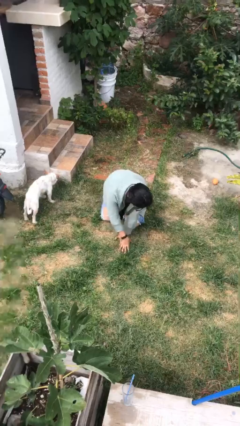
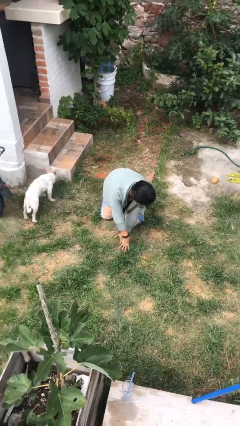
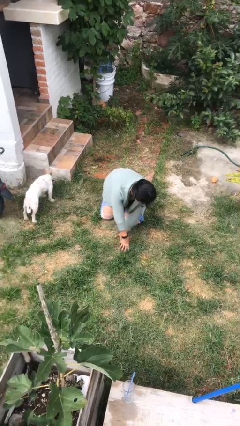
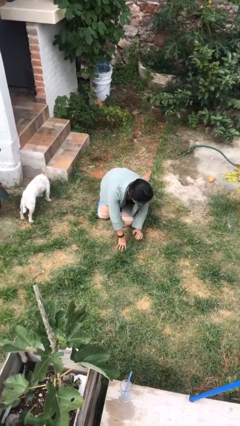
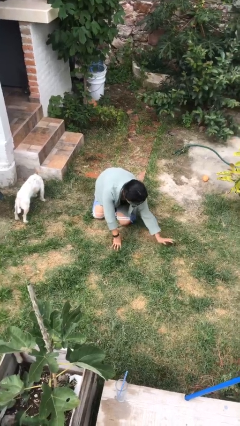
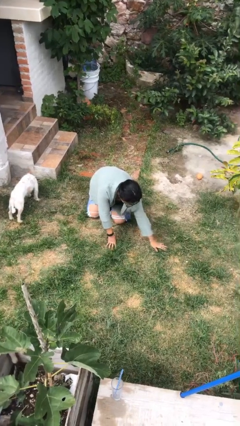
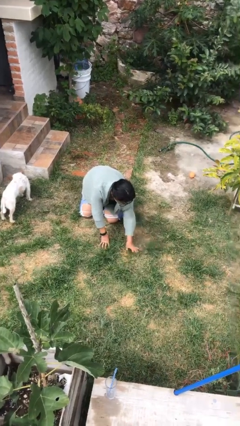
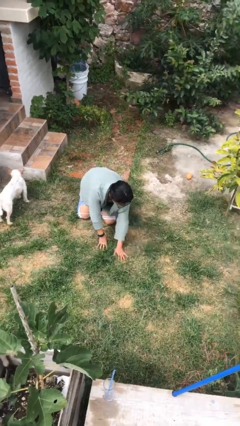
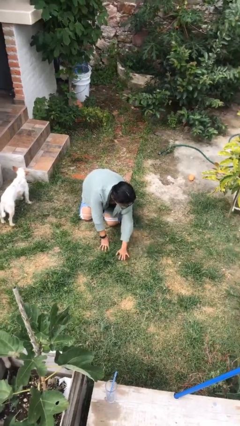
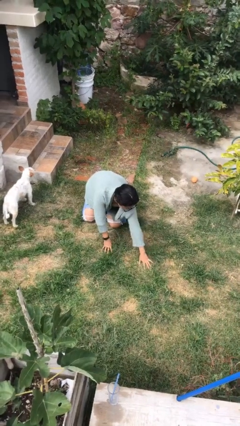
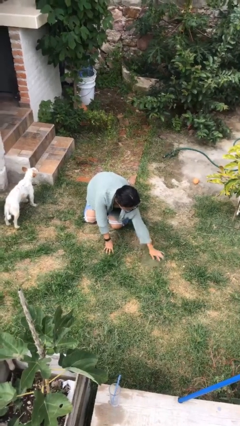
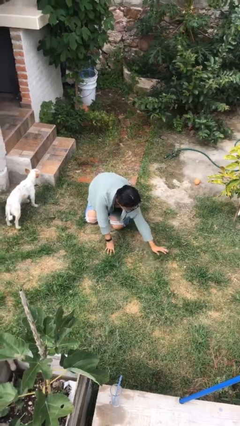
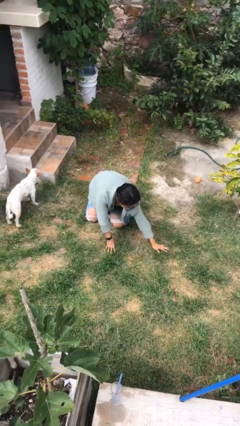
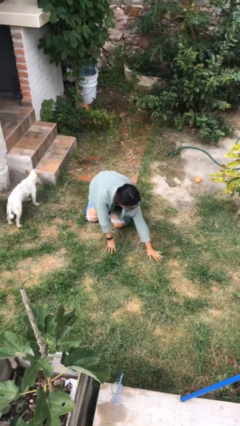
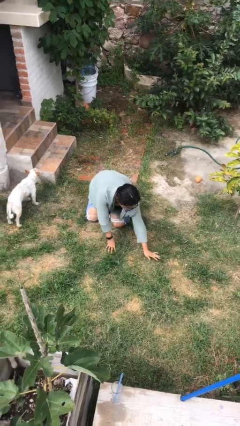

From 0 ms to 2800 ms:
person crawls

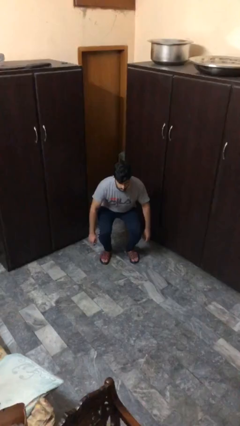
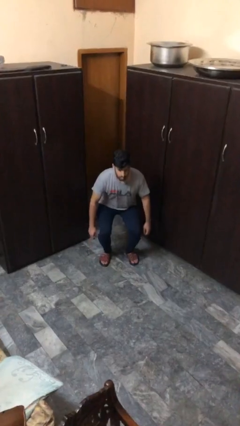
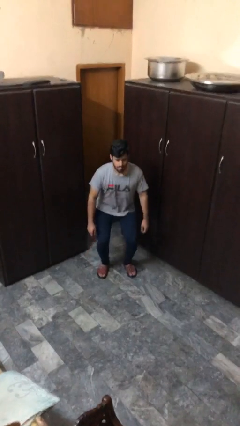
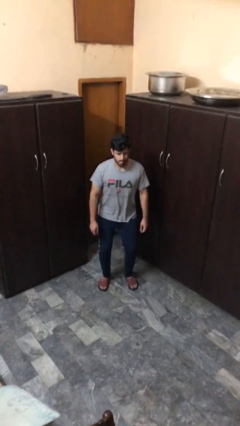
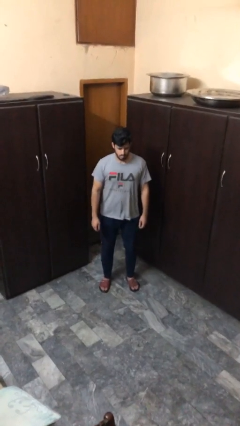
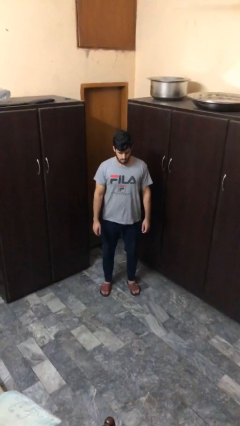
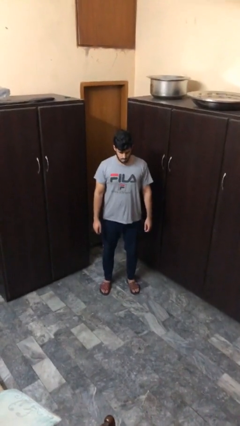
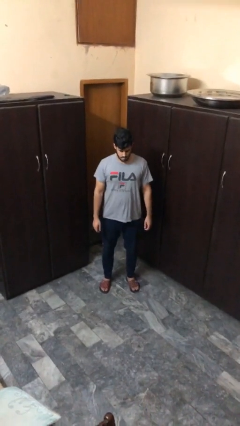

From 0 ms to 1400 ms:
person stands up

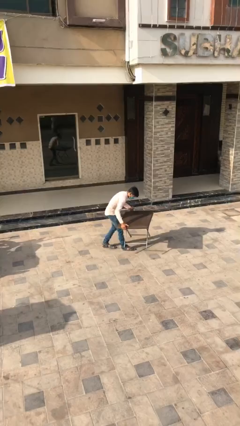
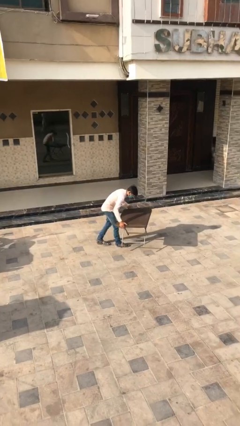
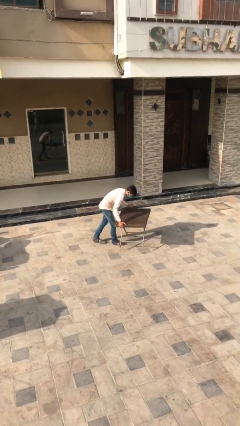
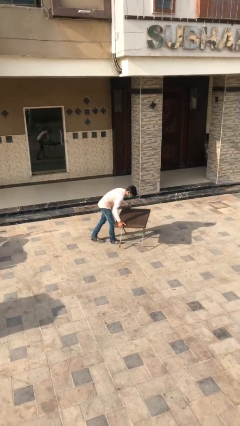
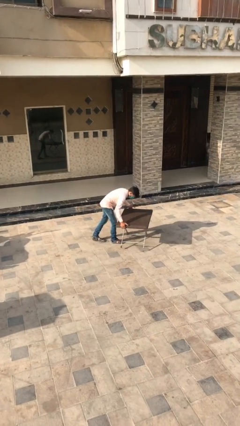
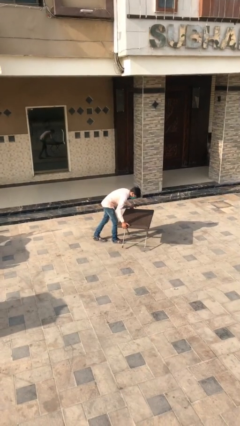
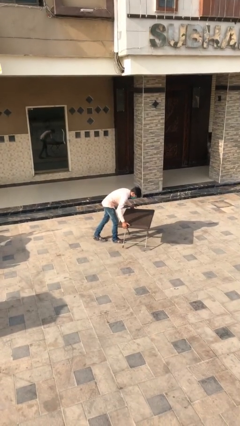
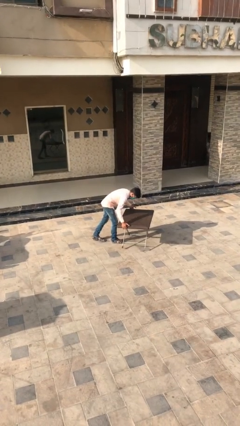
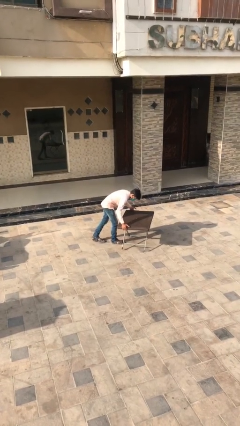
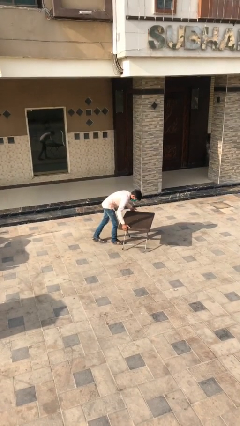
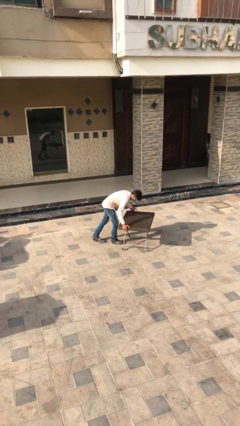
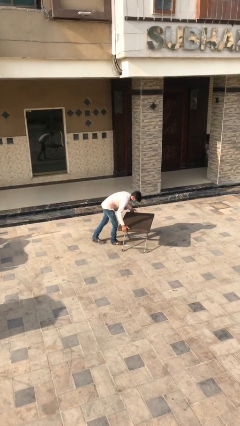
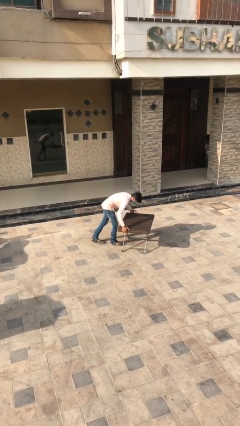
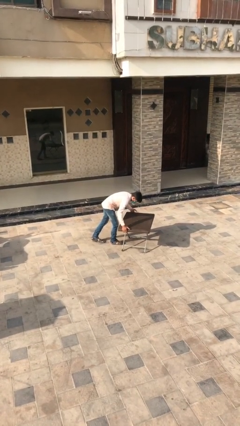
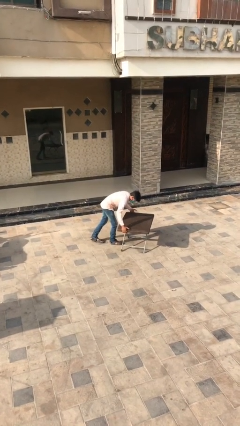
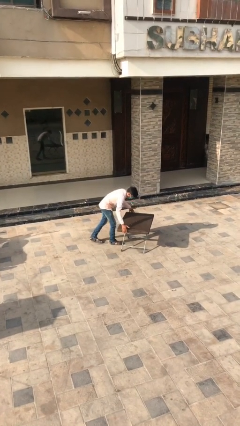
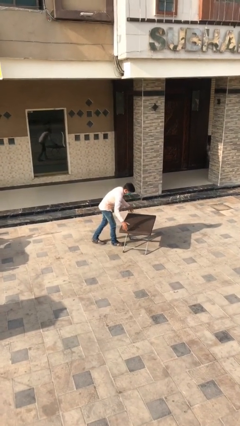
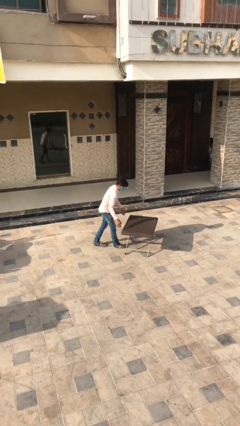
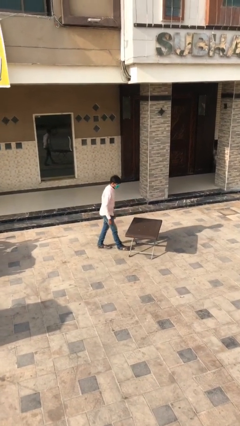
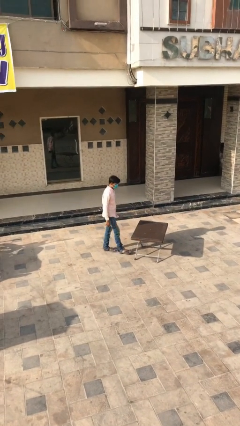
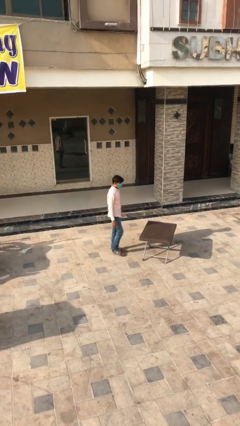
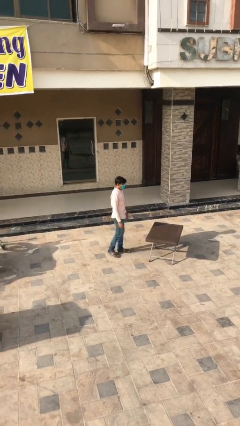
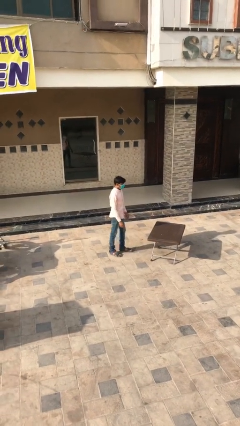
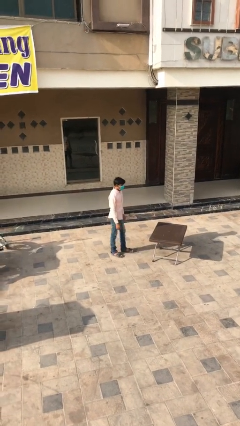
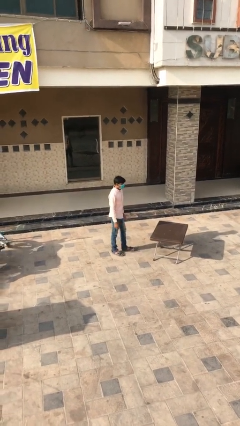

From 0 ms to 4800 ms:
person puts down object on floor

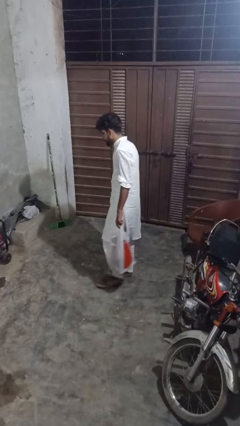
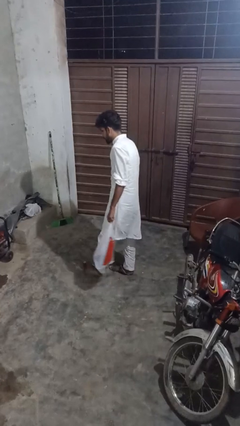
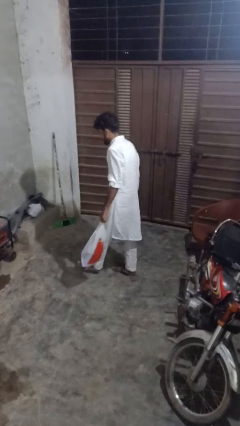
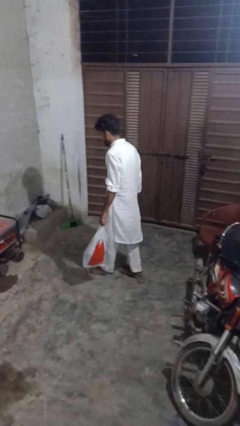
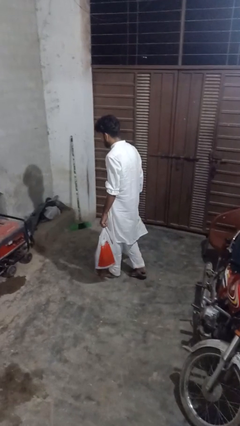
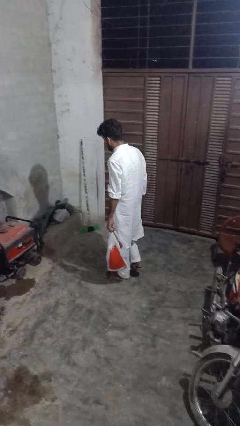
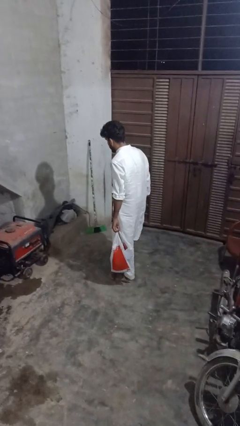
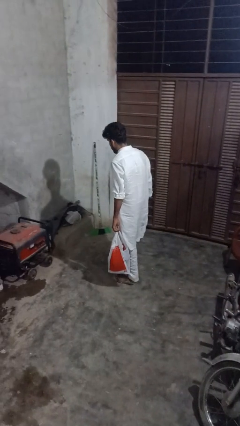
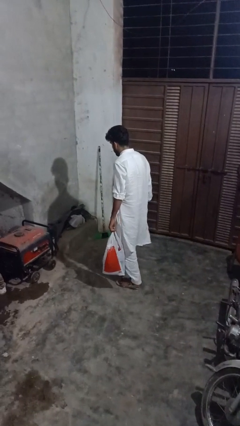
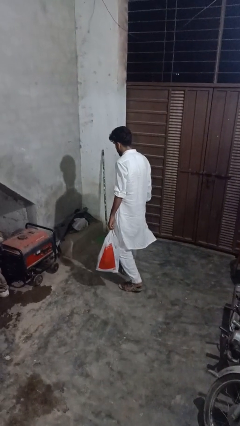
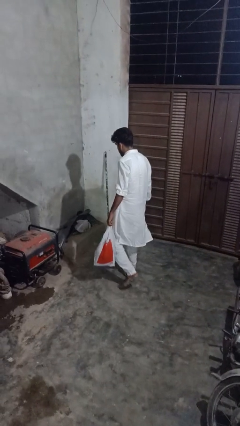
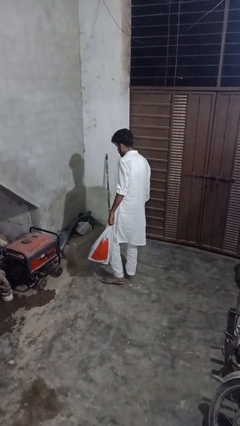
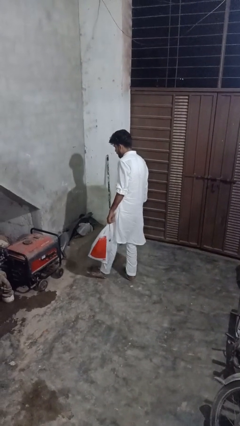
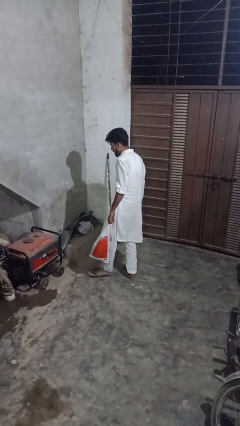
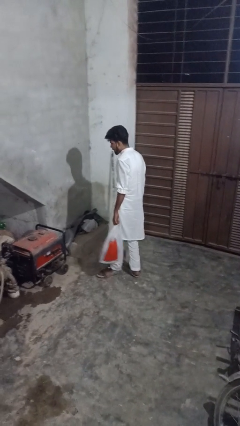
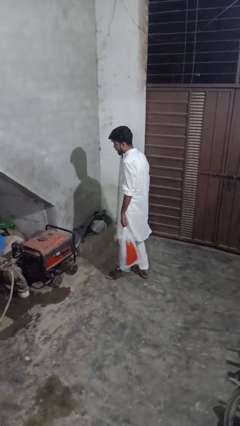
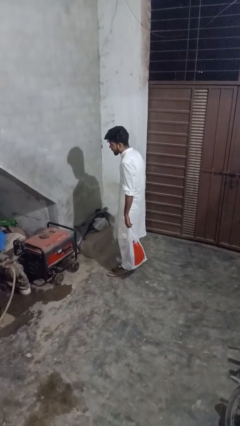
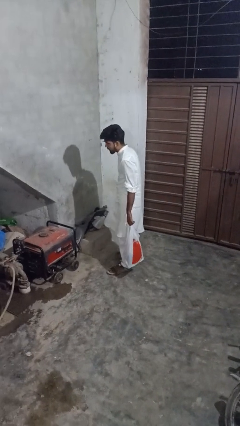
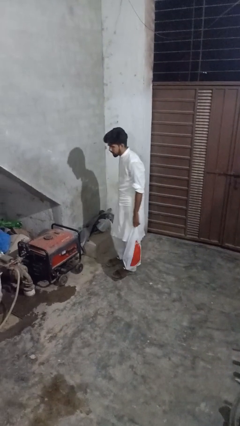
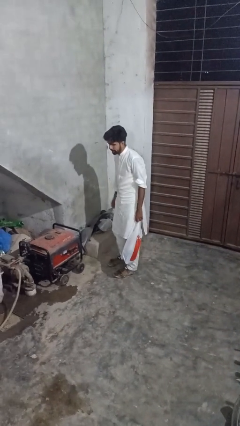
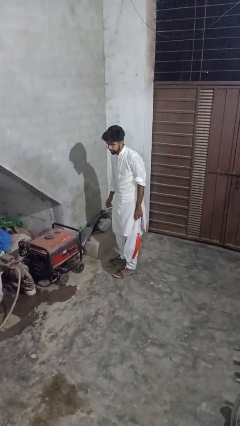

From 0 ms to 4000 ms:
person carries groceries

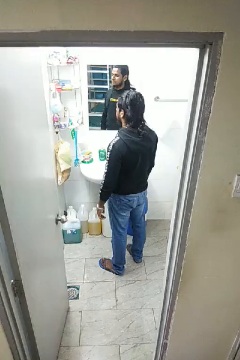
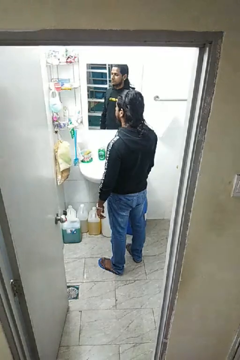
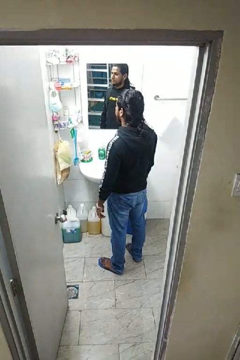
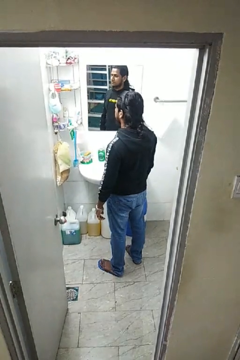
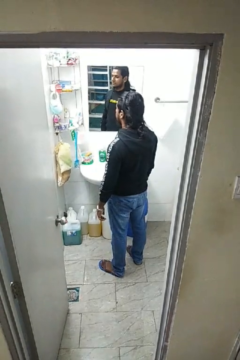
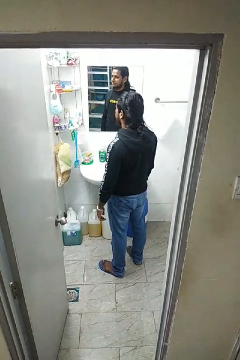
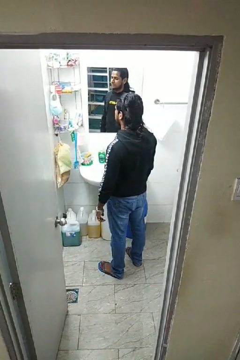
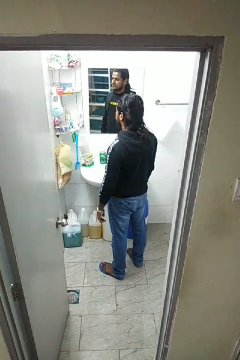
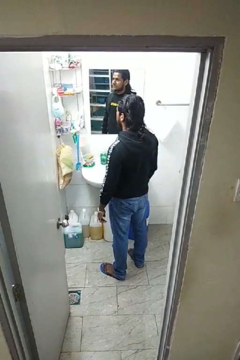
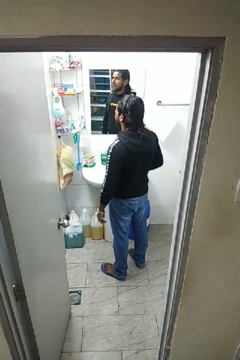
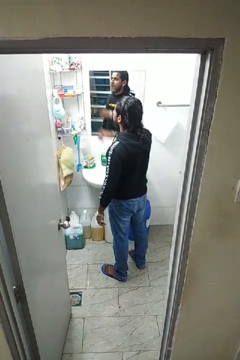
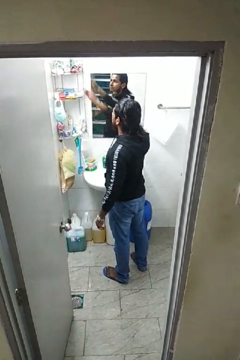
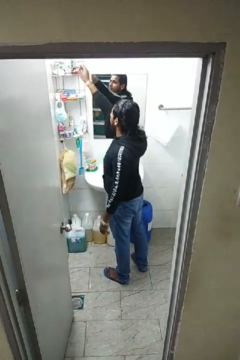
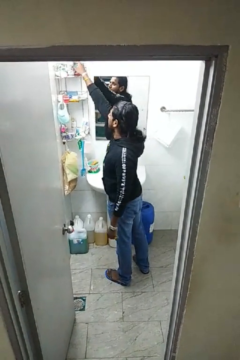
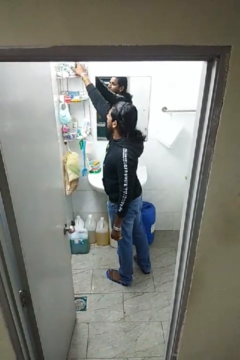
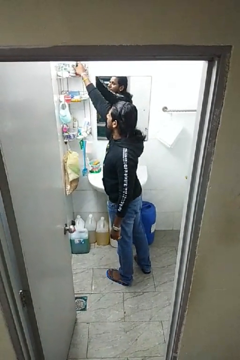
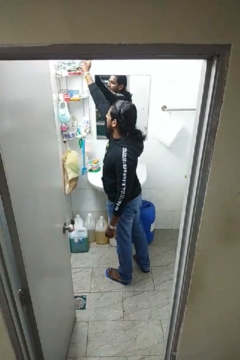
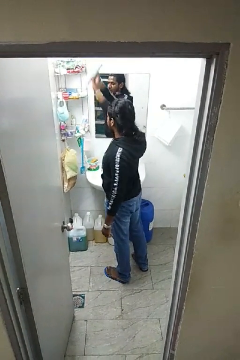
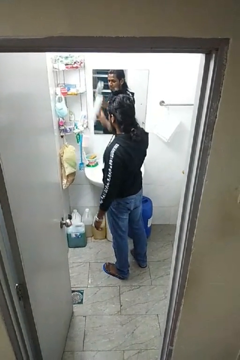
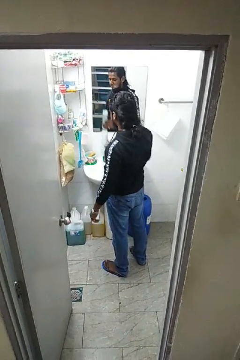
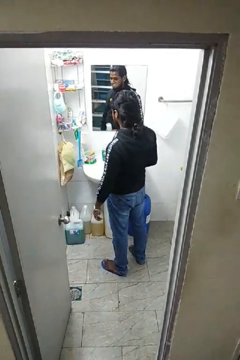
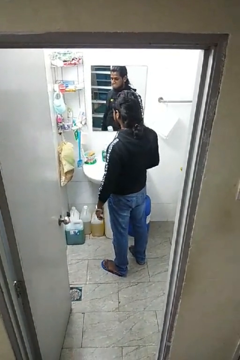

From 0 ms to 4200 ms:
person picks up object from countertop

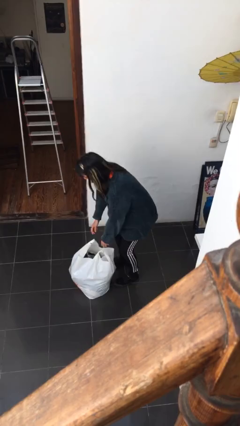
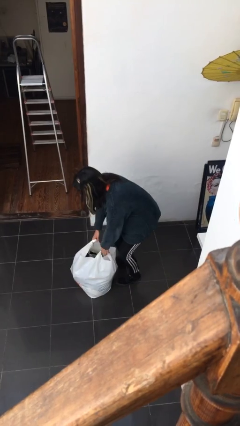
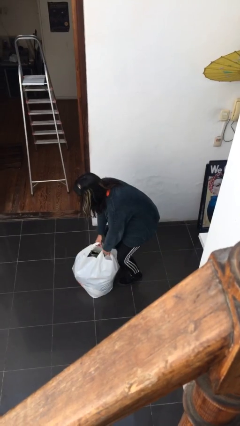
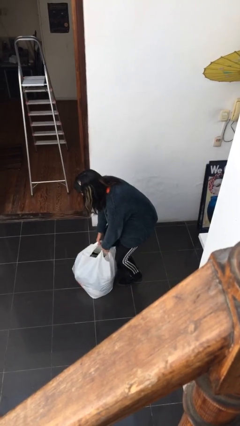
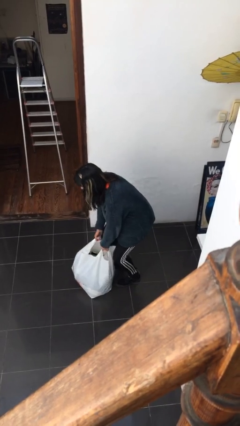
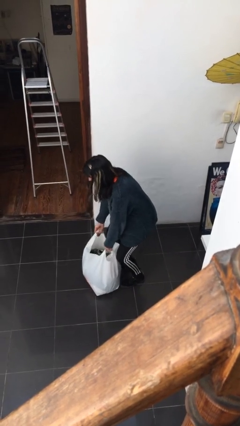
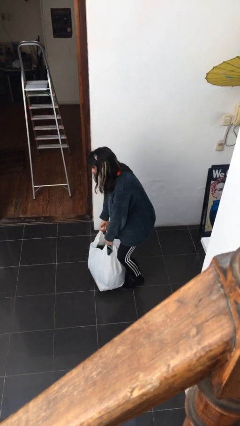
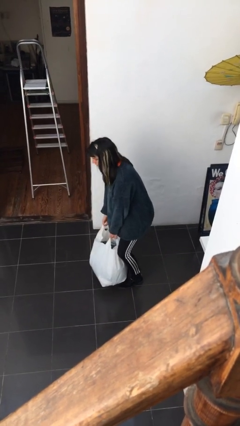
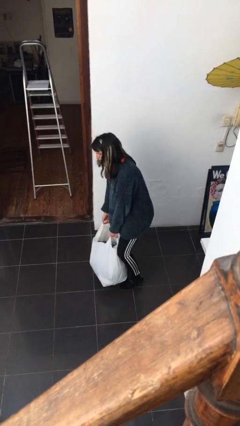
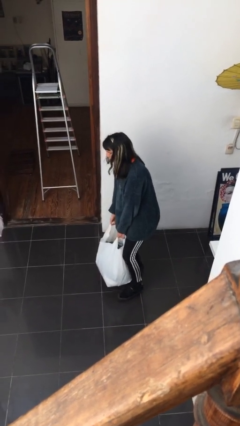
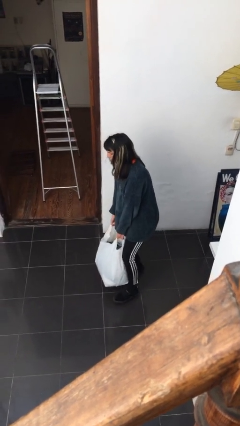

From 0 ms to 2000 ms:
person picks up object from floor
